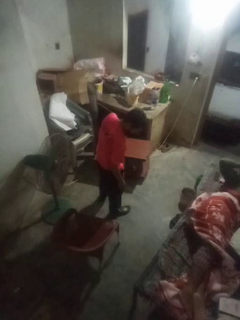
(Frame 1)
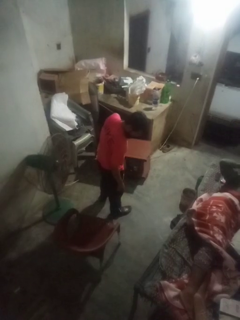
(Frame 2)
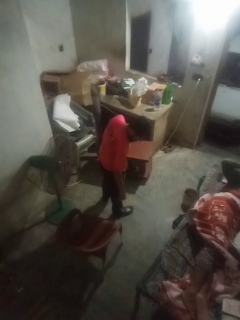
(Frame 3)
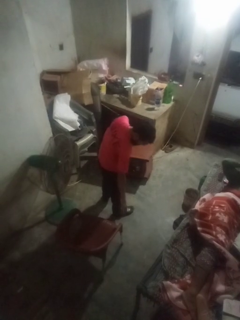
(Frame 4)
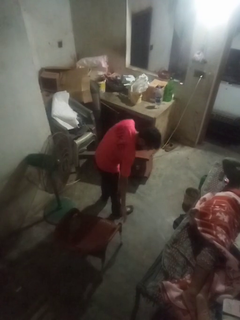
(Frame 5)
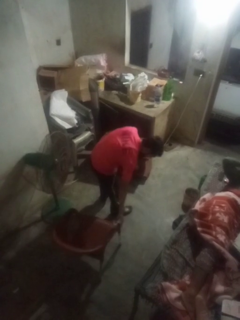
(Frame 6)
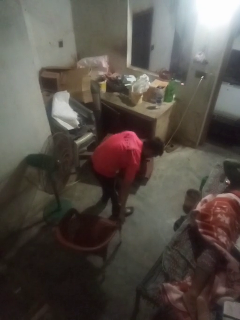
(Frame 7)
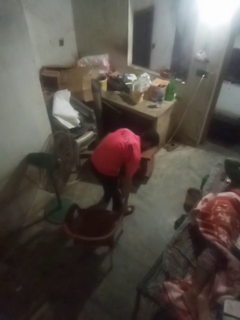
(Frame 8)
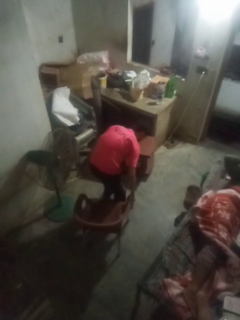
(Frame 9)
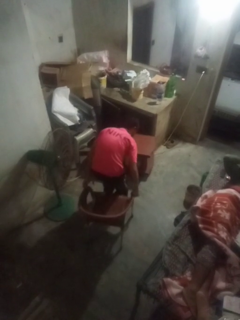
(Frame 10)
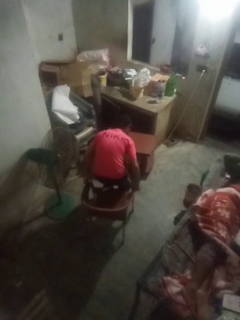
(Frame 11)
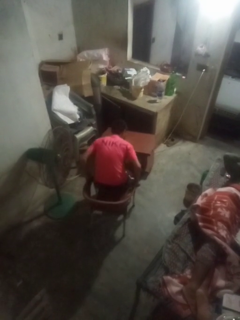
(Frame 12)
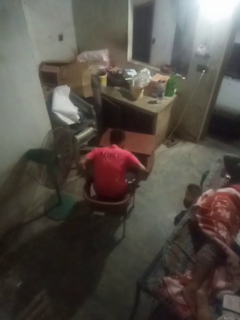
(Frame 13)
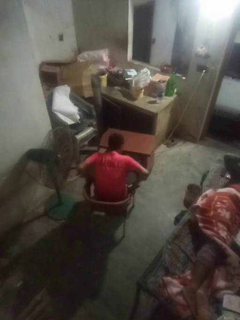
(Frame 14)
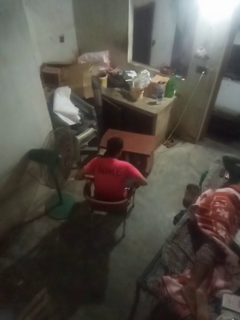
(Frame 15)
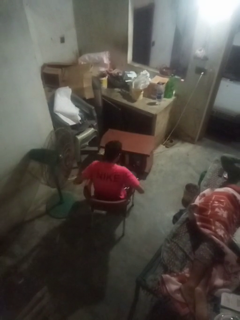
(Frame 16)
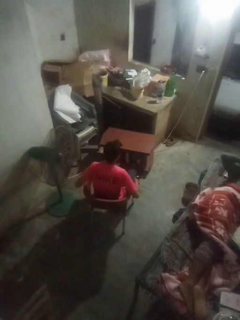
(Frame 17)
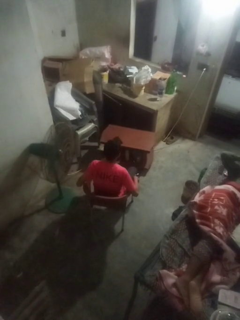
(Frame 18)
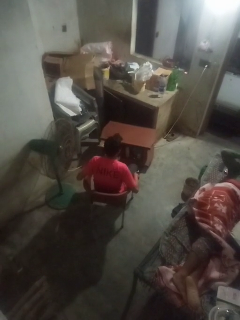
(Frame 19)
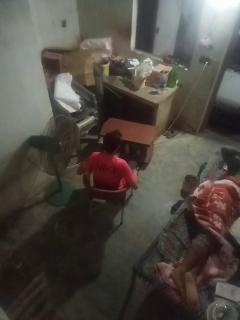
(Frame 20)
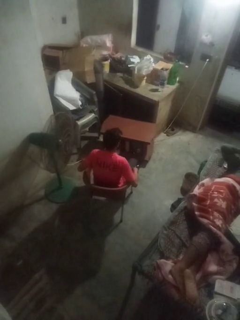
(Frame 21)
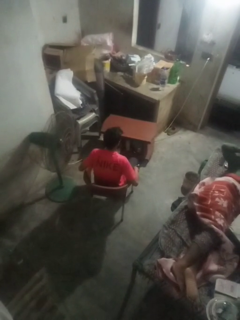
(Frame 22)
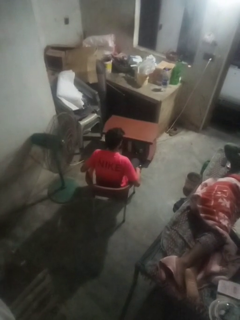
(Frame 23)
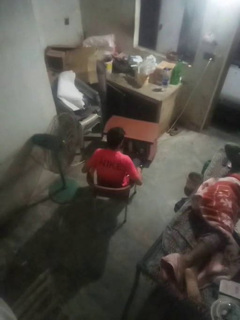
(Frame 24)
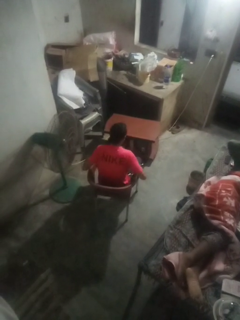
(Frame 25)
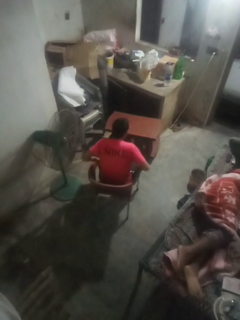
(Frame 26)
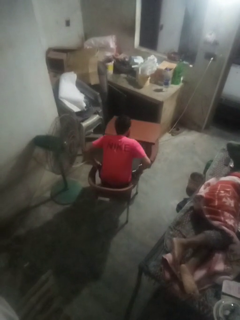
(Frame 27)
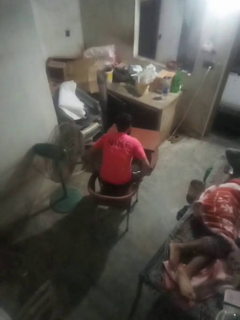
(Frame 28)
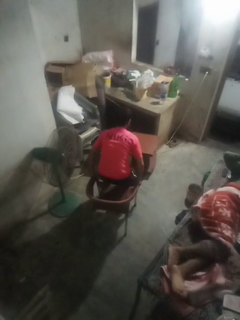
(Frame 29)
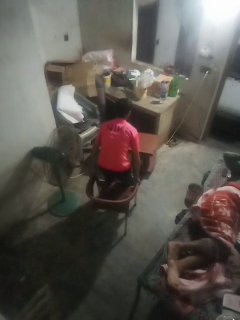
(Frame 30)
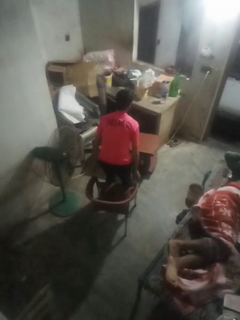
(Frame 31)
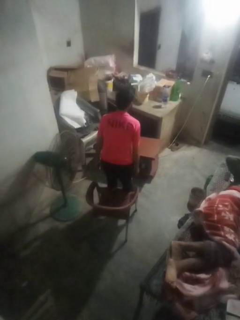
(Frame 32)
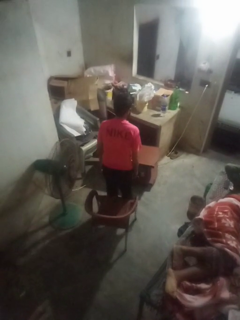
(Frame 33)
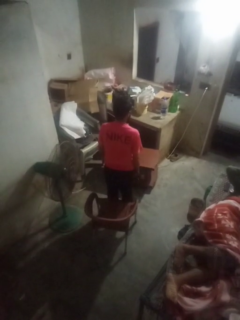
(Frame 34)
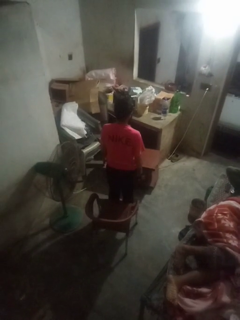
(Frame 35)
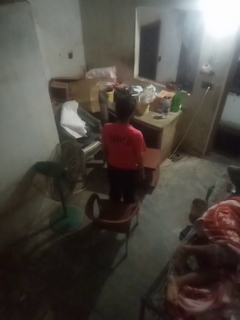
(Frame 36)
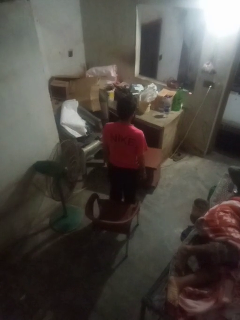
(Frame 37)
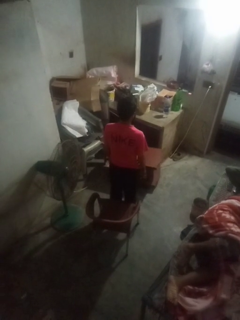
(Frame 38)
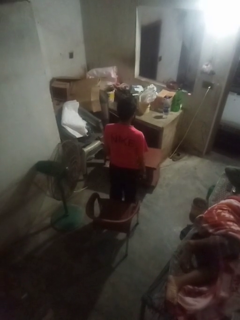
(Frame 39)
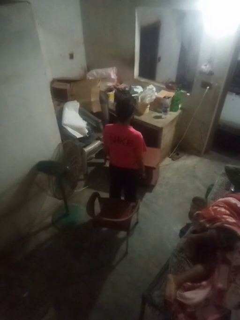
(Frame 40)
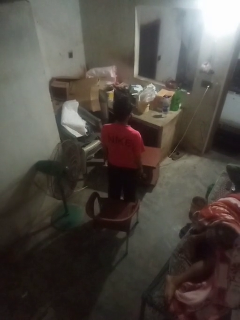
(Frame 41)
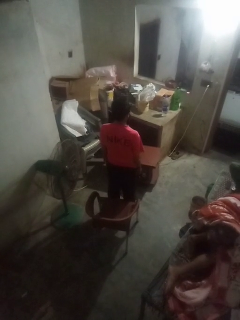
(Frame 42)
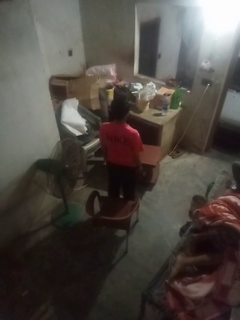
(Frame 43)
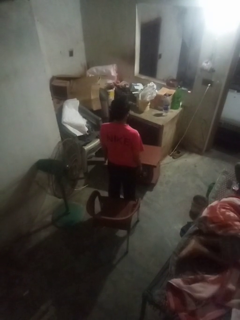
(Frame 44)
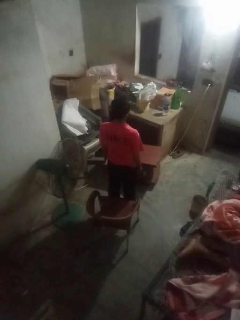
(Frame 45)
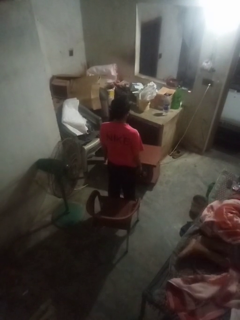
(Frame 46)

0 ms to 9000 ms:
person sits down

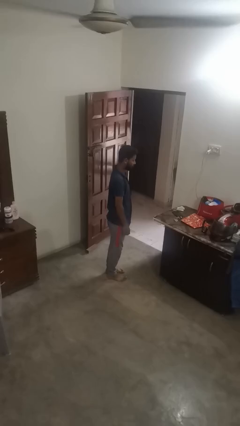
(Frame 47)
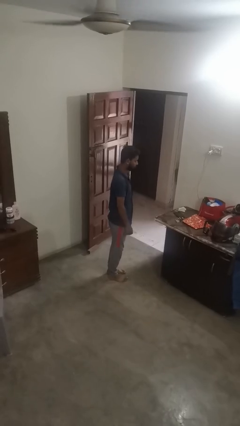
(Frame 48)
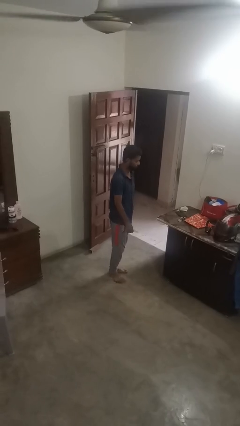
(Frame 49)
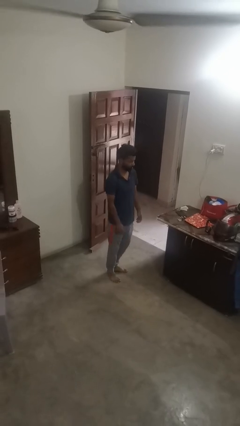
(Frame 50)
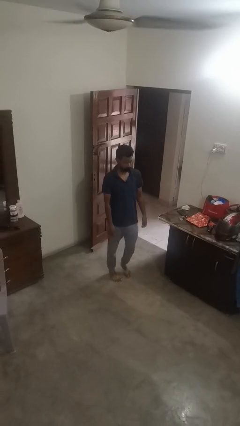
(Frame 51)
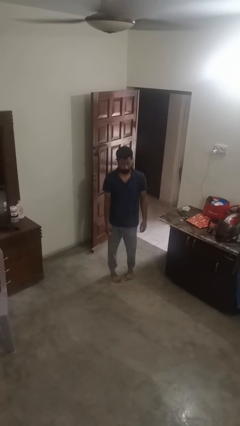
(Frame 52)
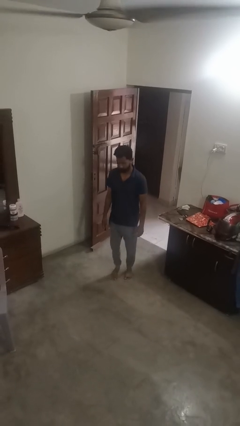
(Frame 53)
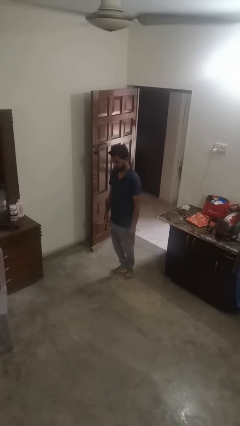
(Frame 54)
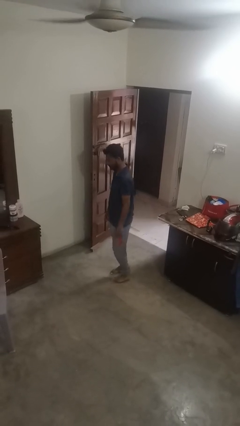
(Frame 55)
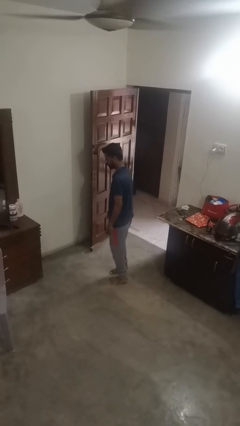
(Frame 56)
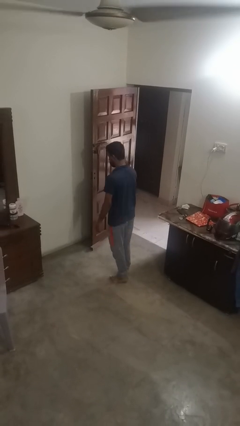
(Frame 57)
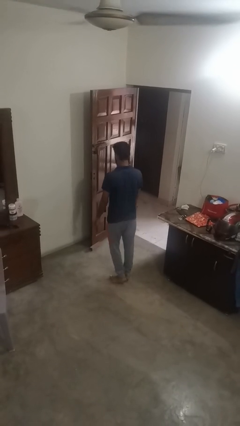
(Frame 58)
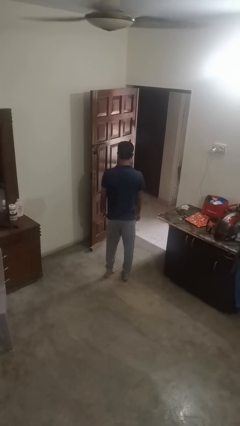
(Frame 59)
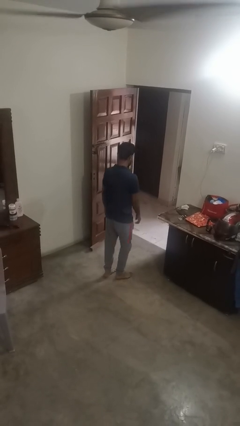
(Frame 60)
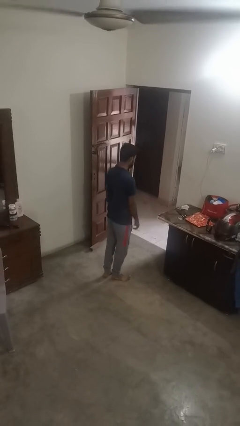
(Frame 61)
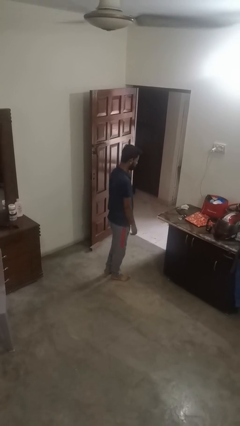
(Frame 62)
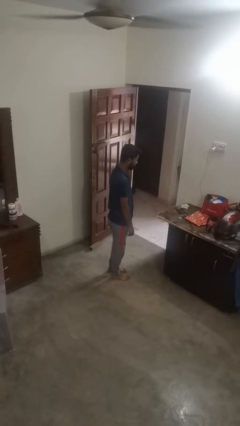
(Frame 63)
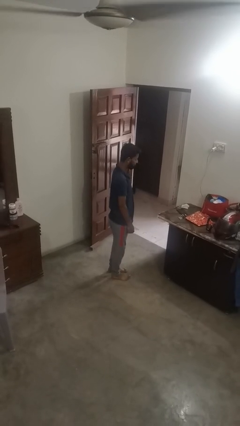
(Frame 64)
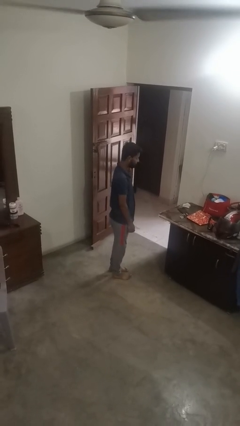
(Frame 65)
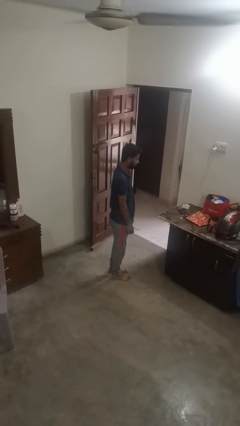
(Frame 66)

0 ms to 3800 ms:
person twirls

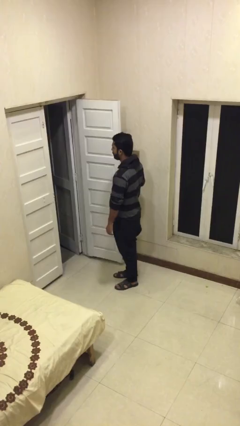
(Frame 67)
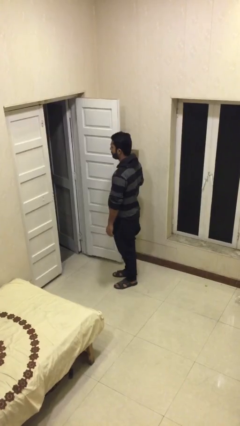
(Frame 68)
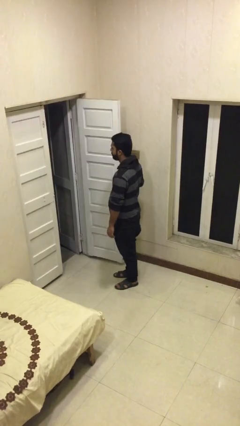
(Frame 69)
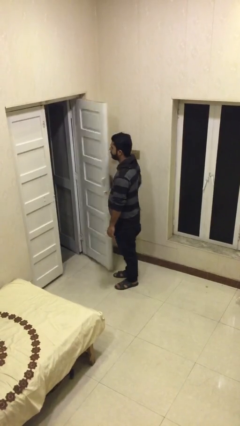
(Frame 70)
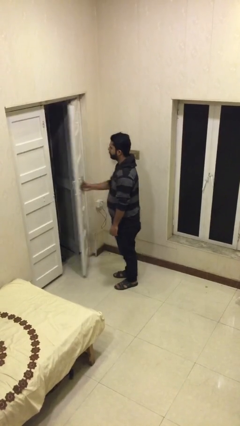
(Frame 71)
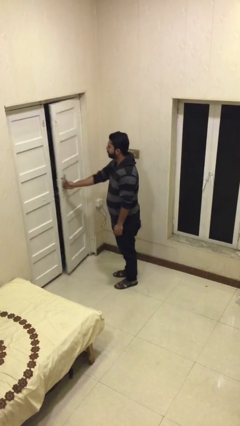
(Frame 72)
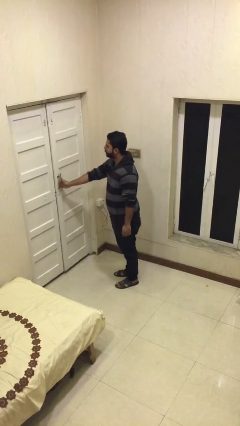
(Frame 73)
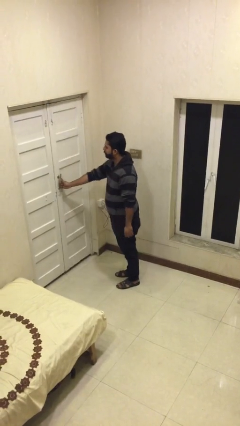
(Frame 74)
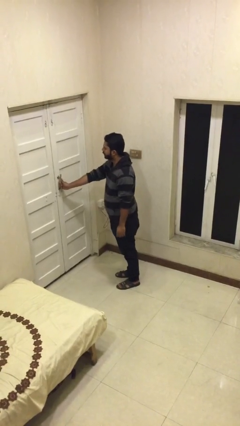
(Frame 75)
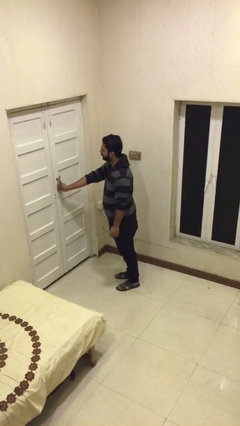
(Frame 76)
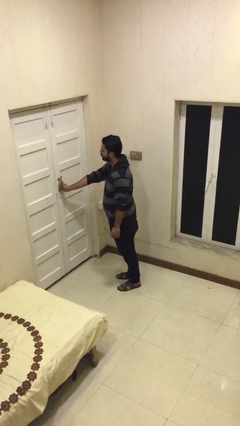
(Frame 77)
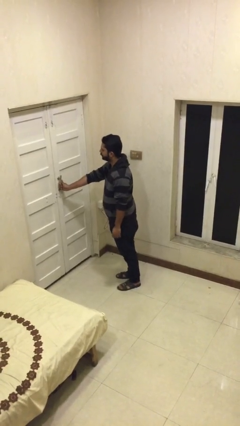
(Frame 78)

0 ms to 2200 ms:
person closes facility door

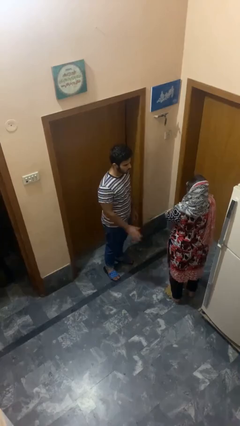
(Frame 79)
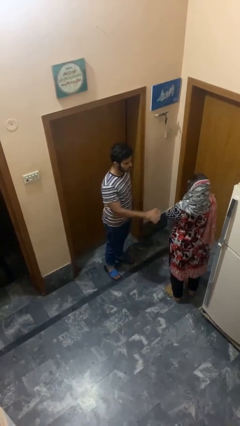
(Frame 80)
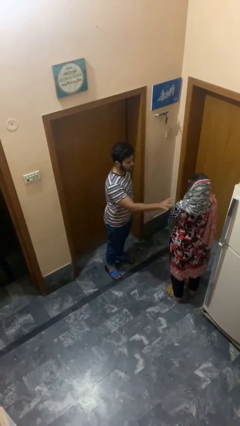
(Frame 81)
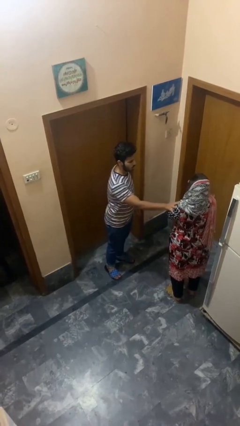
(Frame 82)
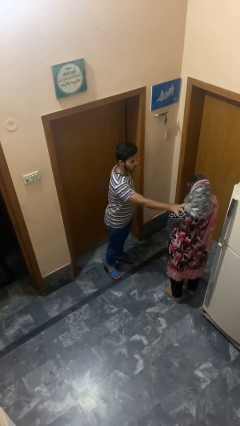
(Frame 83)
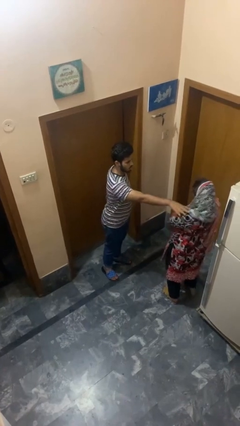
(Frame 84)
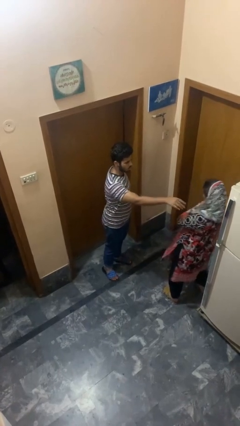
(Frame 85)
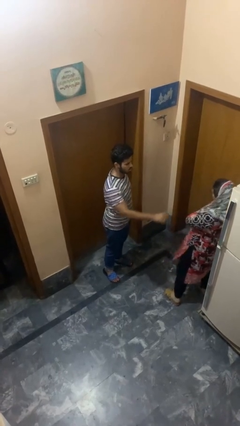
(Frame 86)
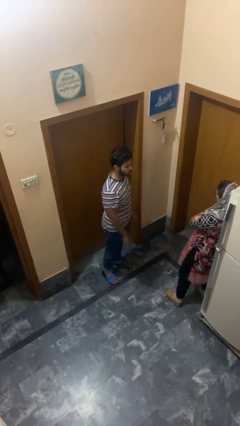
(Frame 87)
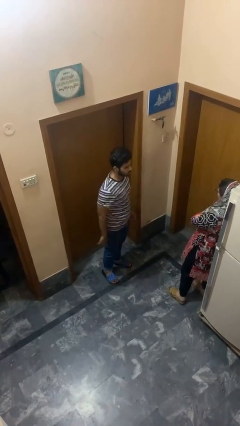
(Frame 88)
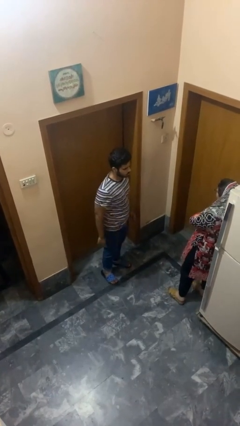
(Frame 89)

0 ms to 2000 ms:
person shoves person

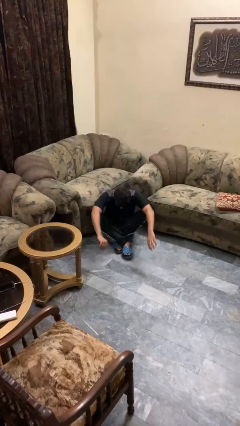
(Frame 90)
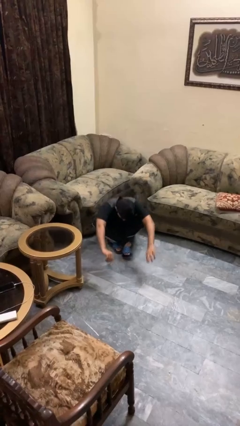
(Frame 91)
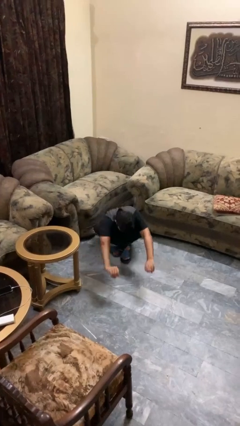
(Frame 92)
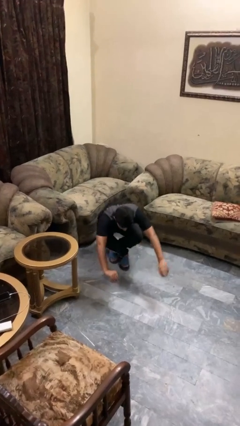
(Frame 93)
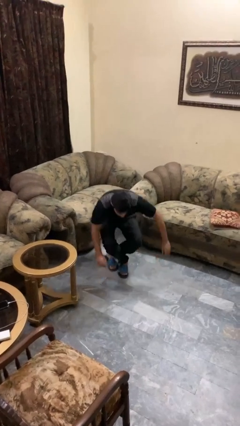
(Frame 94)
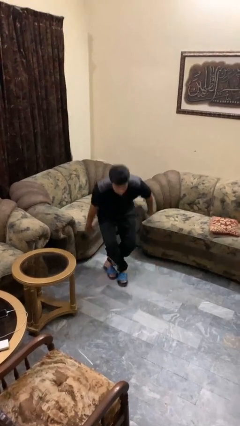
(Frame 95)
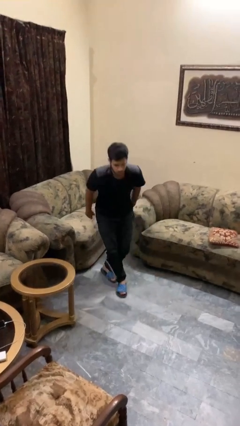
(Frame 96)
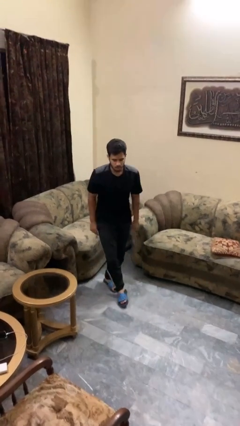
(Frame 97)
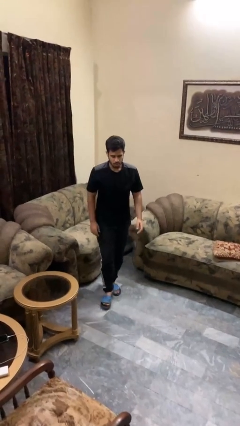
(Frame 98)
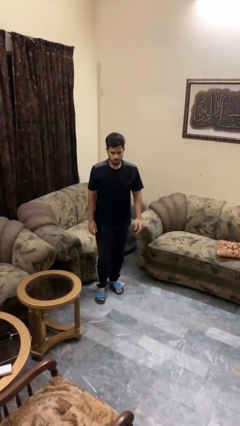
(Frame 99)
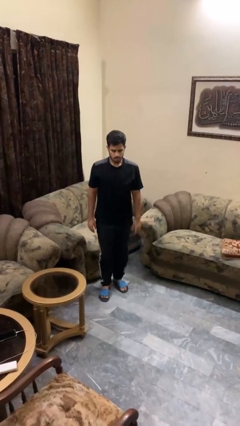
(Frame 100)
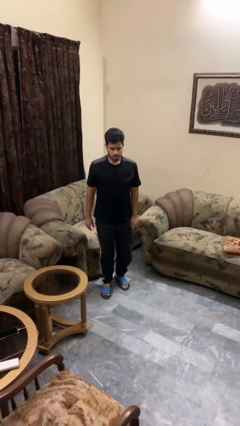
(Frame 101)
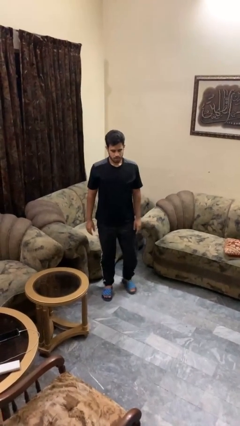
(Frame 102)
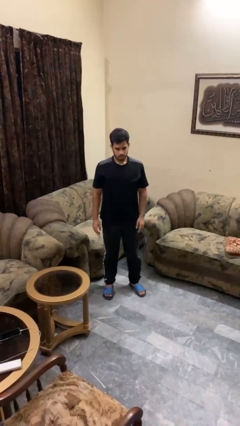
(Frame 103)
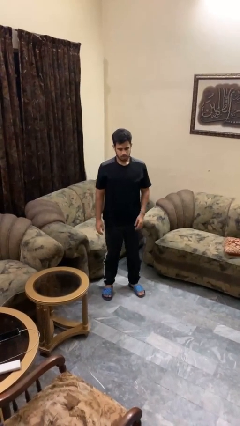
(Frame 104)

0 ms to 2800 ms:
person stands up from floor
